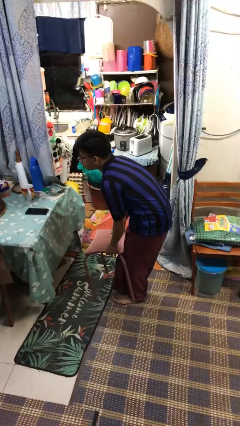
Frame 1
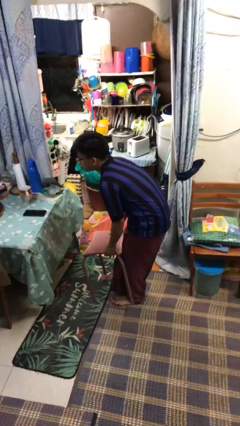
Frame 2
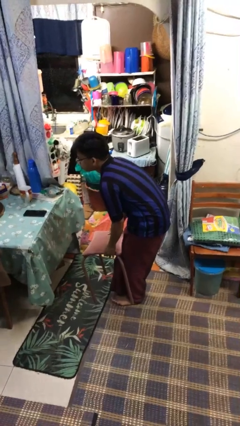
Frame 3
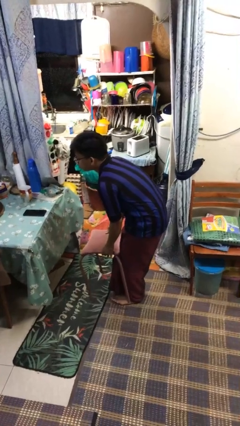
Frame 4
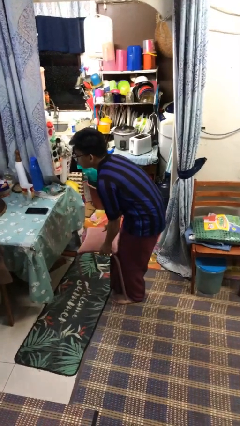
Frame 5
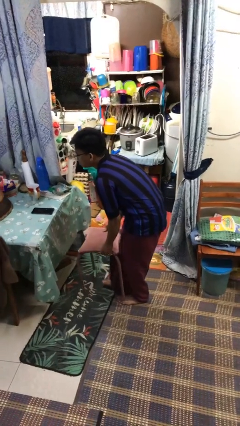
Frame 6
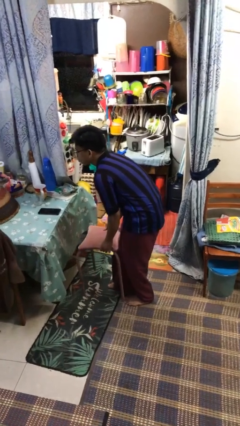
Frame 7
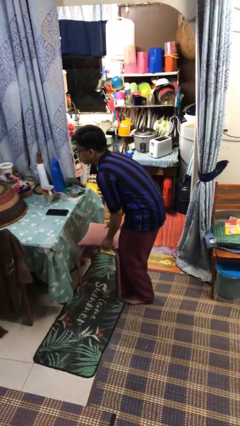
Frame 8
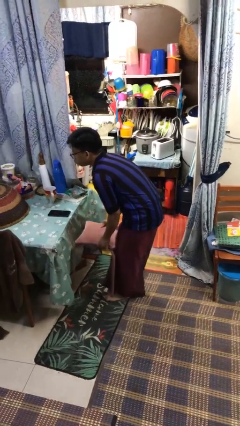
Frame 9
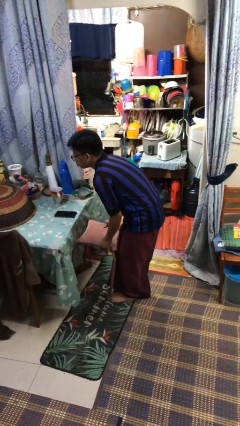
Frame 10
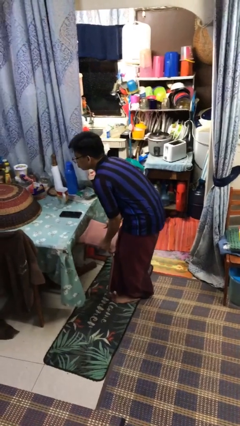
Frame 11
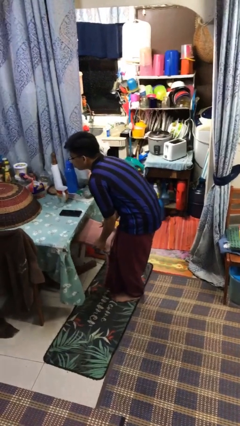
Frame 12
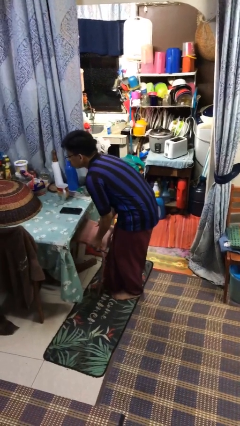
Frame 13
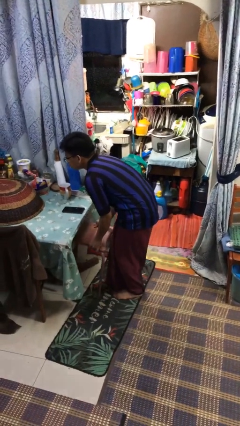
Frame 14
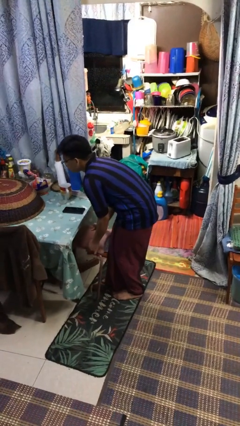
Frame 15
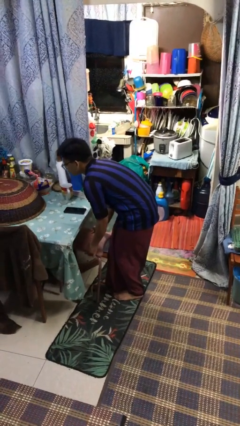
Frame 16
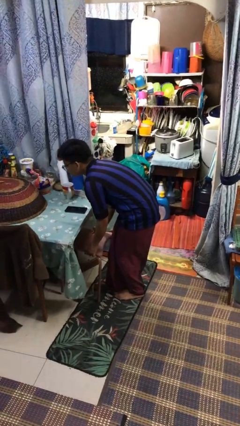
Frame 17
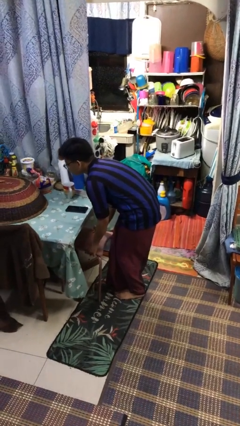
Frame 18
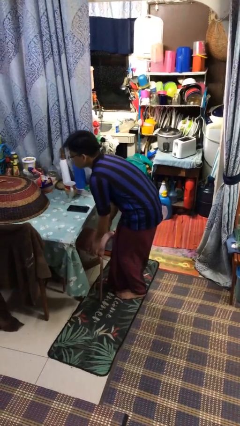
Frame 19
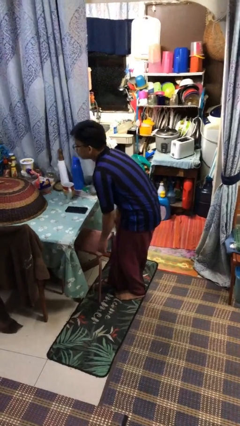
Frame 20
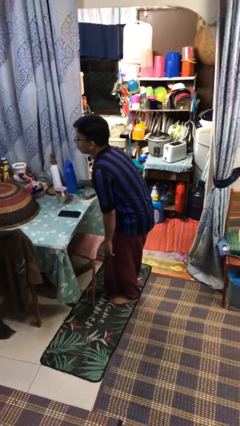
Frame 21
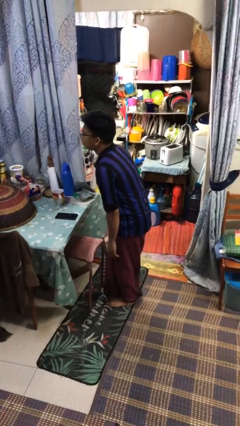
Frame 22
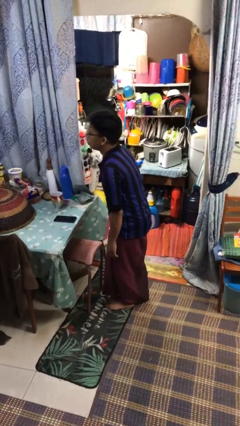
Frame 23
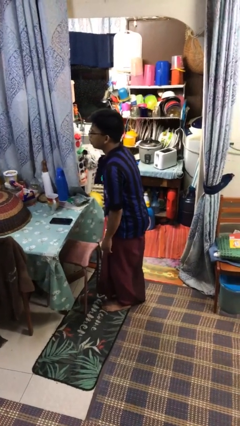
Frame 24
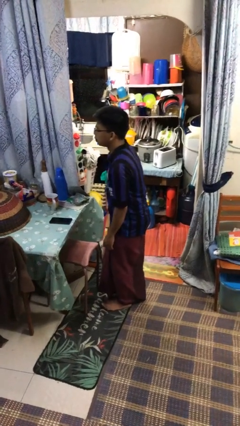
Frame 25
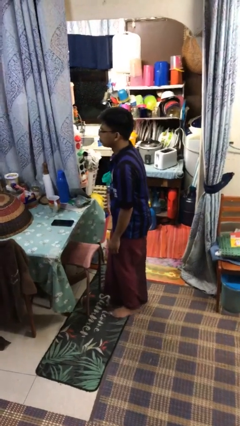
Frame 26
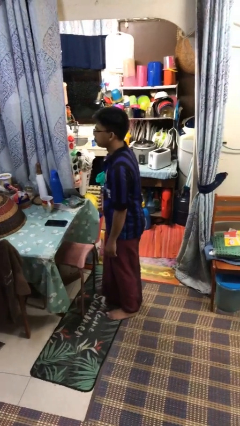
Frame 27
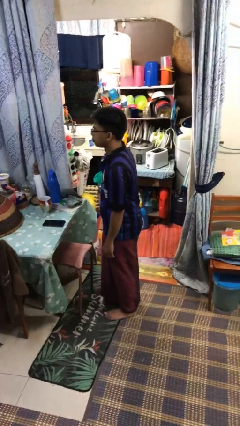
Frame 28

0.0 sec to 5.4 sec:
person pushes in chair

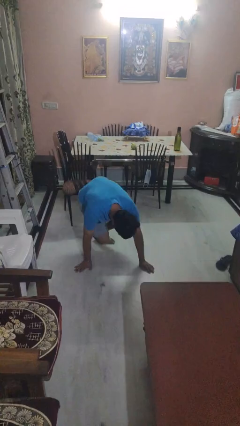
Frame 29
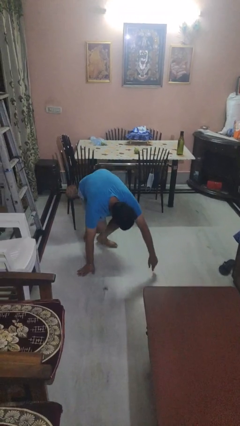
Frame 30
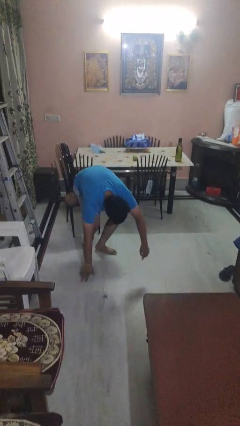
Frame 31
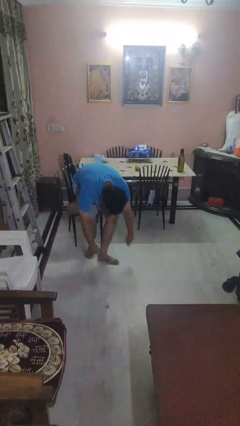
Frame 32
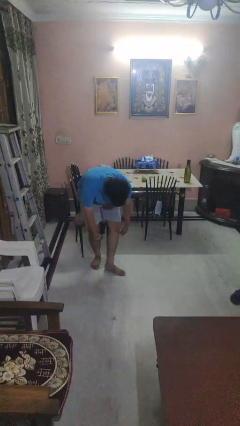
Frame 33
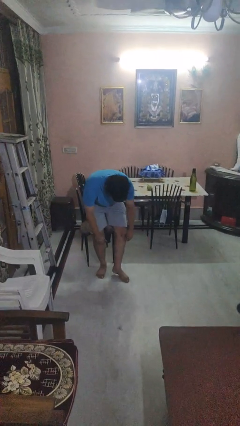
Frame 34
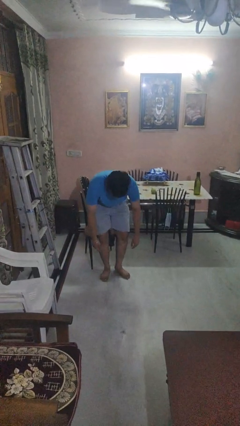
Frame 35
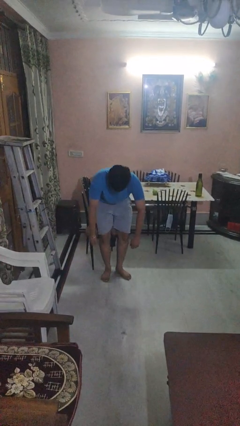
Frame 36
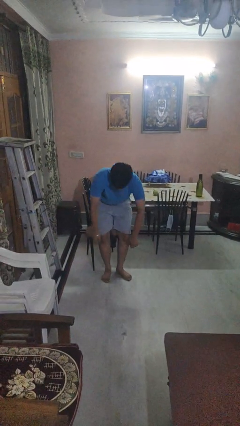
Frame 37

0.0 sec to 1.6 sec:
person stands up from floor

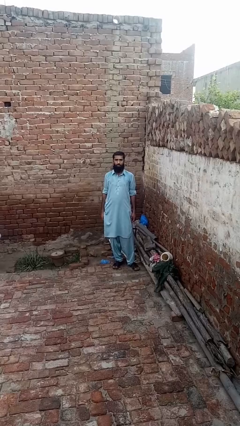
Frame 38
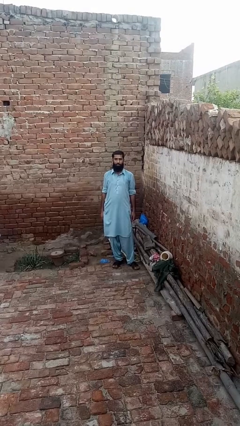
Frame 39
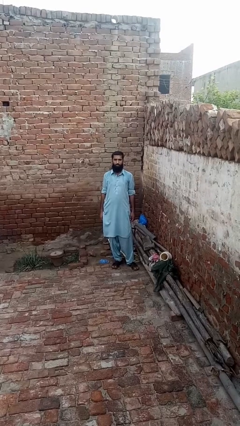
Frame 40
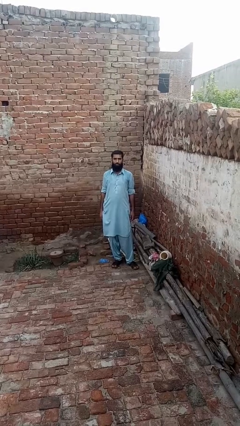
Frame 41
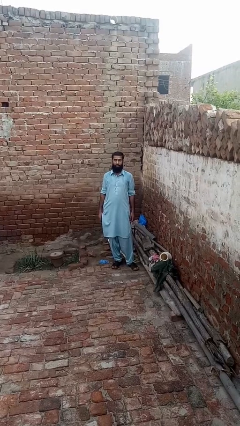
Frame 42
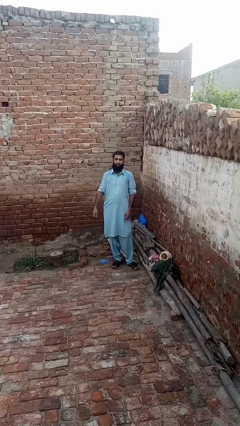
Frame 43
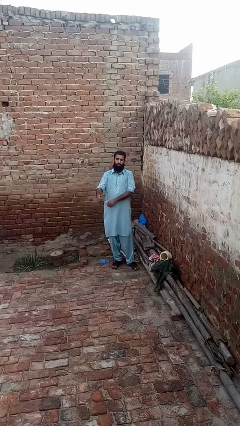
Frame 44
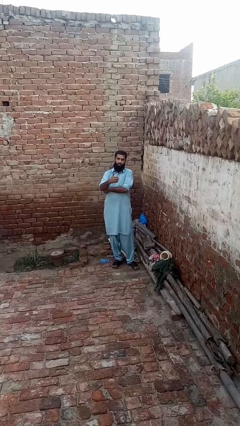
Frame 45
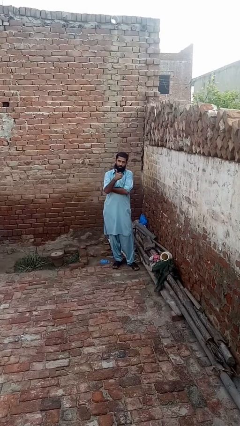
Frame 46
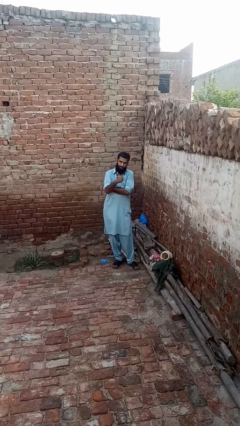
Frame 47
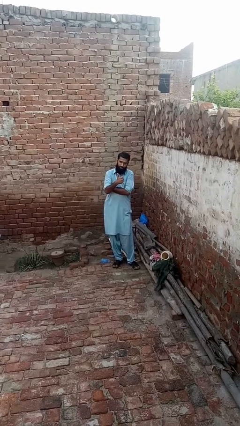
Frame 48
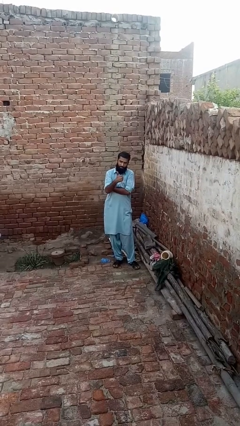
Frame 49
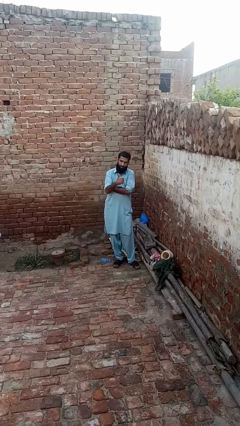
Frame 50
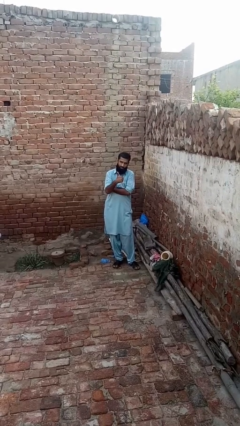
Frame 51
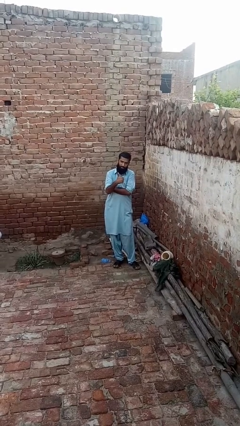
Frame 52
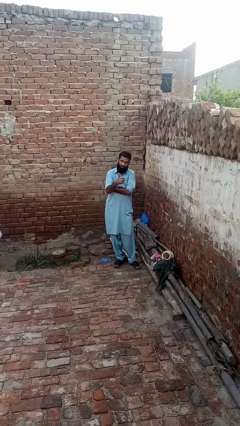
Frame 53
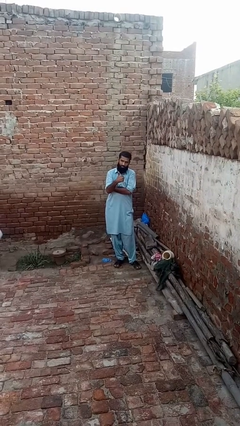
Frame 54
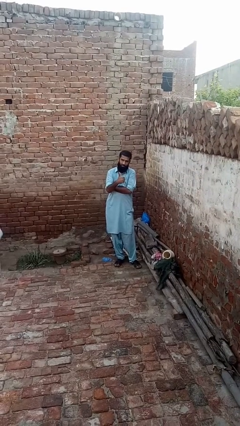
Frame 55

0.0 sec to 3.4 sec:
person gestures thumbs up

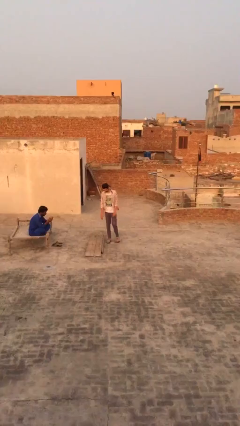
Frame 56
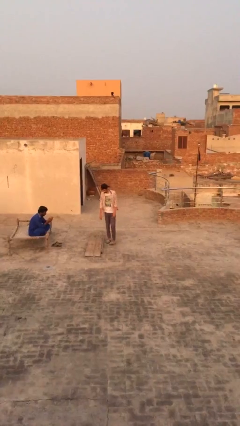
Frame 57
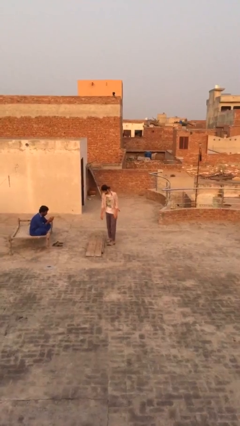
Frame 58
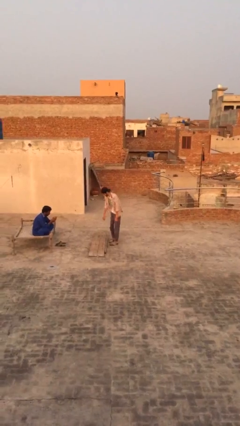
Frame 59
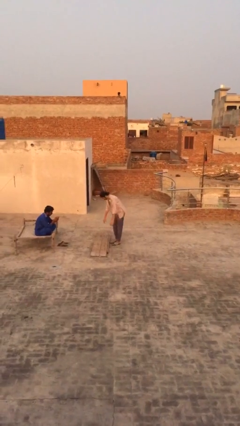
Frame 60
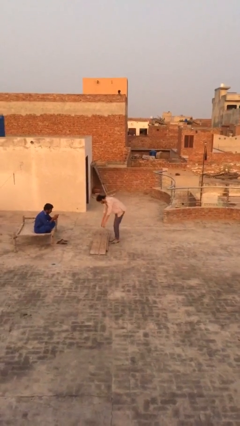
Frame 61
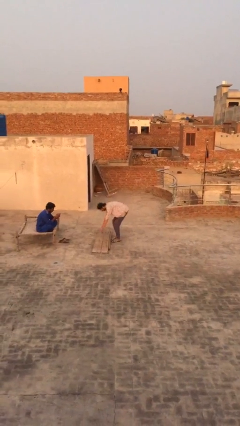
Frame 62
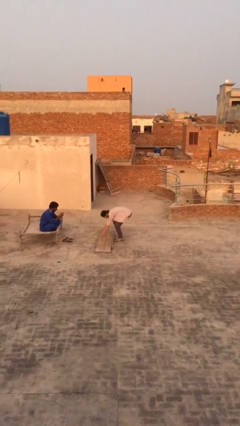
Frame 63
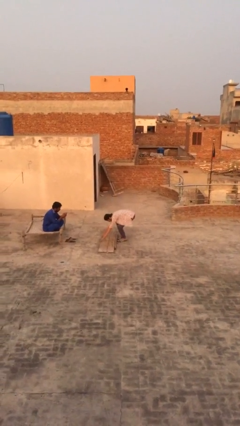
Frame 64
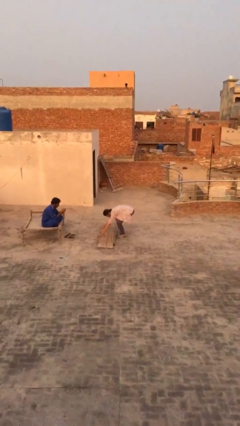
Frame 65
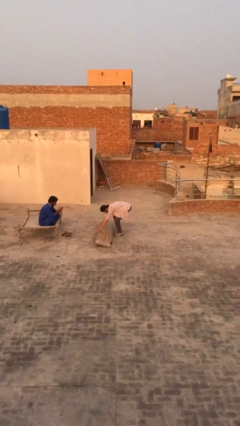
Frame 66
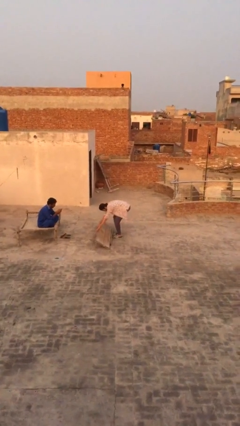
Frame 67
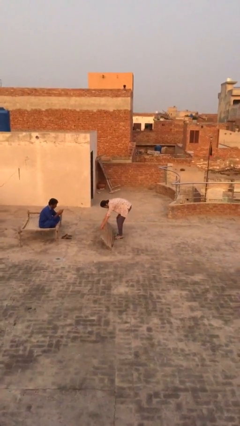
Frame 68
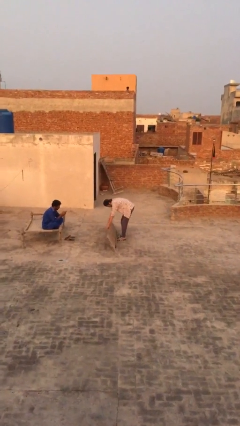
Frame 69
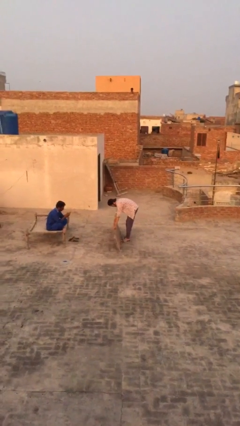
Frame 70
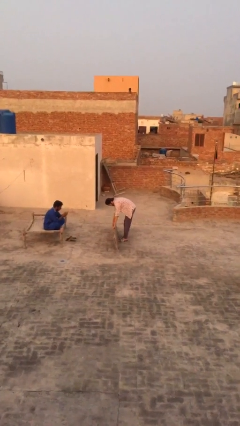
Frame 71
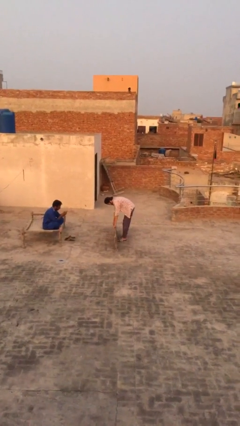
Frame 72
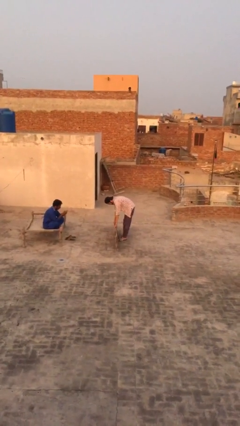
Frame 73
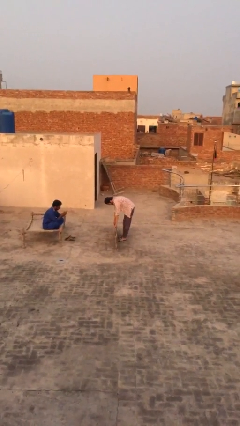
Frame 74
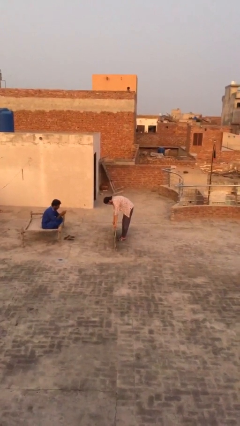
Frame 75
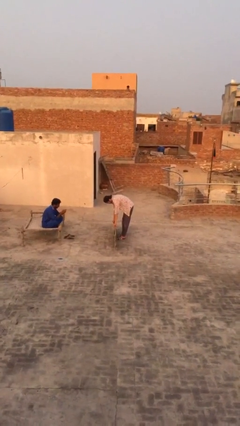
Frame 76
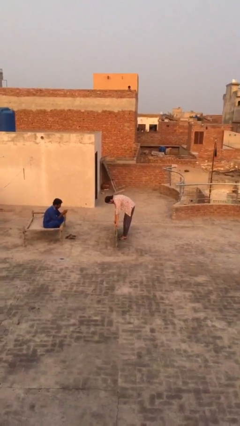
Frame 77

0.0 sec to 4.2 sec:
person picks up object from floor

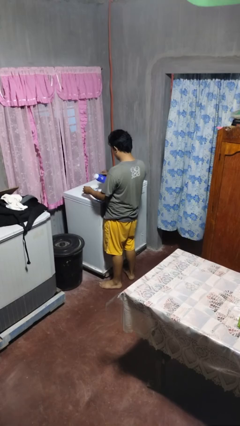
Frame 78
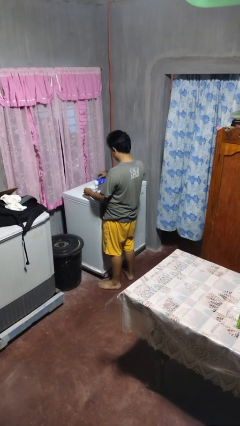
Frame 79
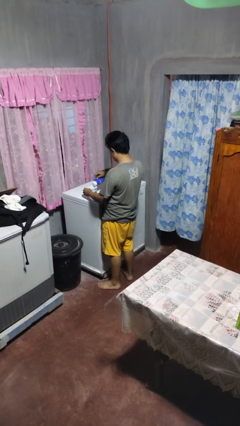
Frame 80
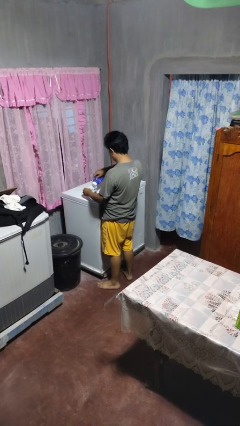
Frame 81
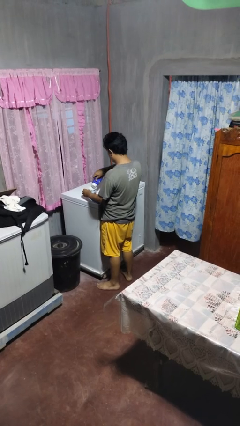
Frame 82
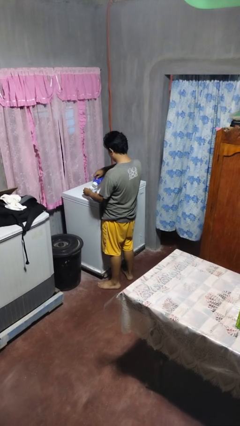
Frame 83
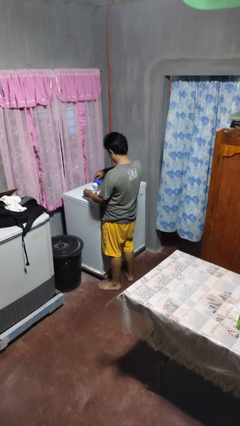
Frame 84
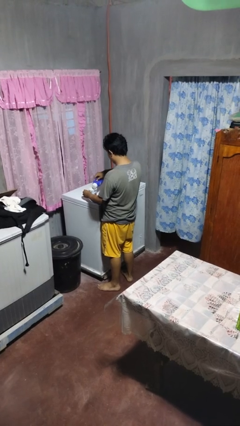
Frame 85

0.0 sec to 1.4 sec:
person pours coffee into mug

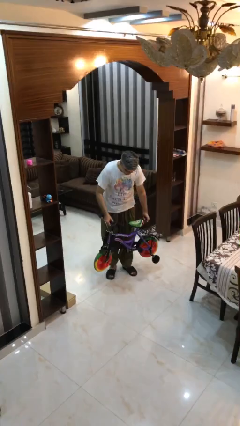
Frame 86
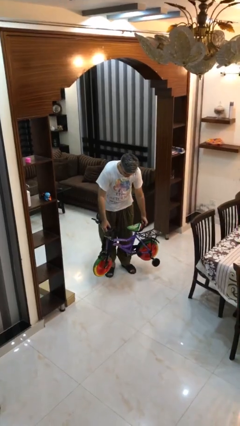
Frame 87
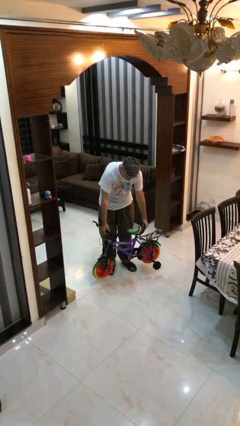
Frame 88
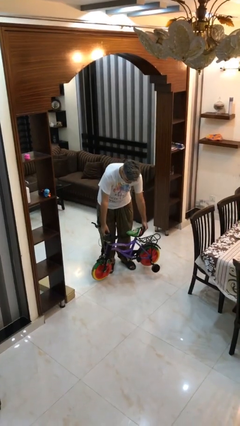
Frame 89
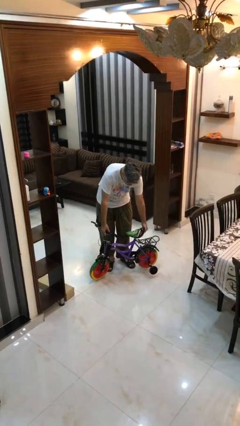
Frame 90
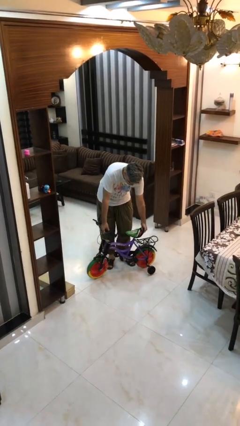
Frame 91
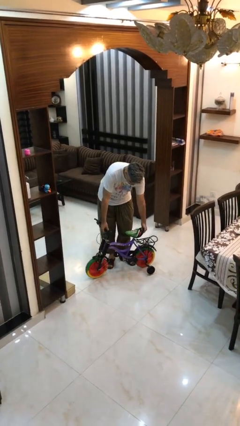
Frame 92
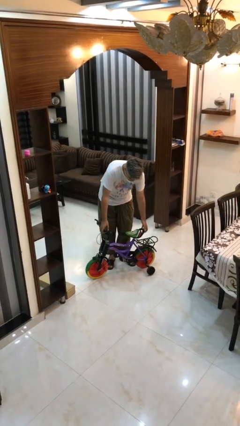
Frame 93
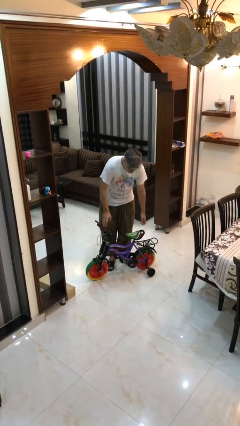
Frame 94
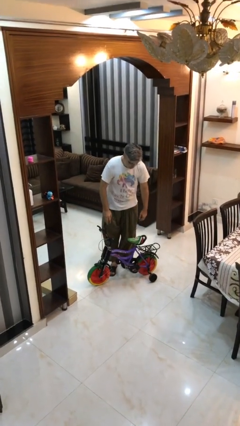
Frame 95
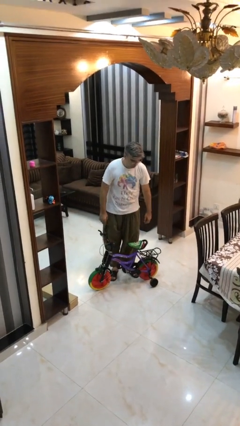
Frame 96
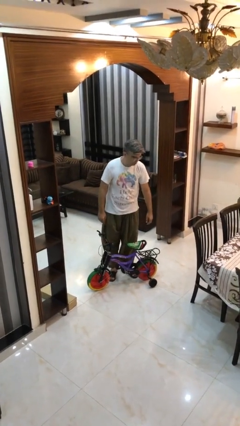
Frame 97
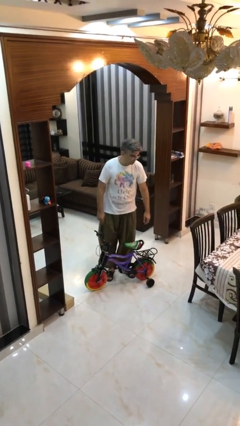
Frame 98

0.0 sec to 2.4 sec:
person puts down object on floor
